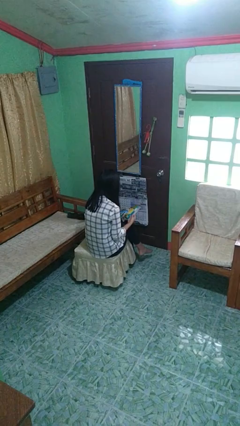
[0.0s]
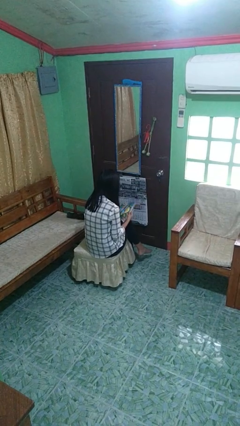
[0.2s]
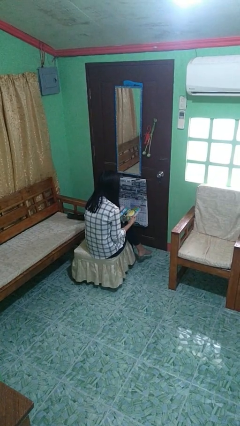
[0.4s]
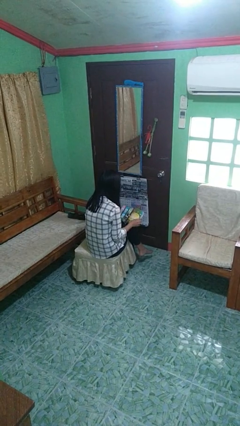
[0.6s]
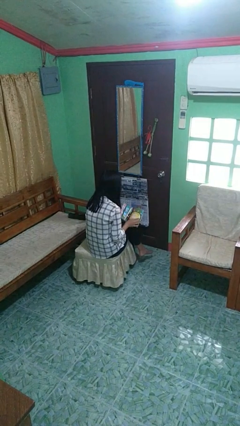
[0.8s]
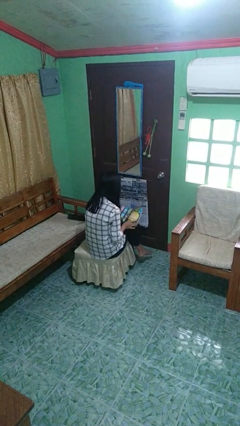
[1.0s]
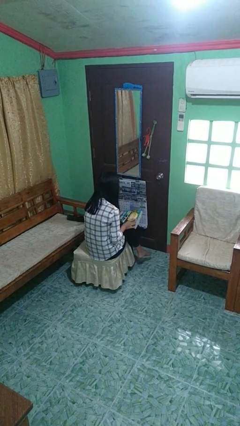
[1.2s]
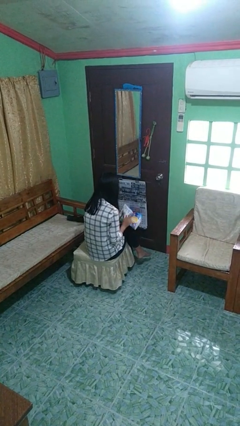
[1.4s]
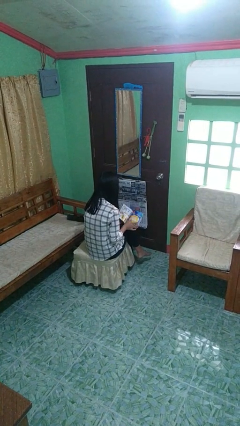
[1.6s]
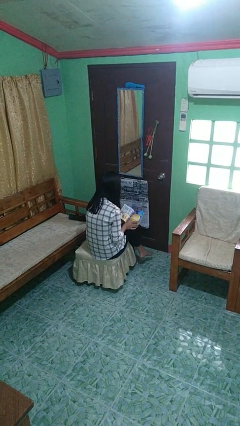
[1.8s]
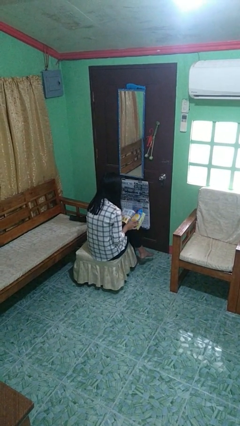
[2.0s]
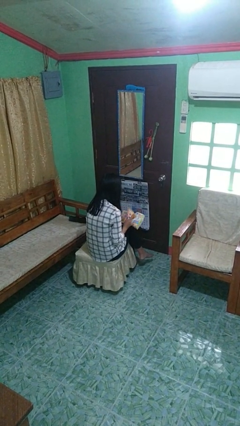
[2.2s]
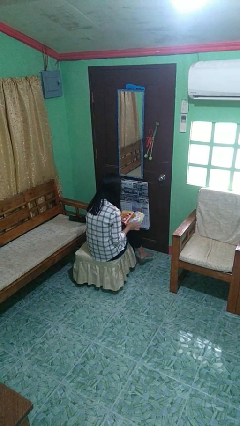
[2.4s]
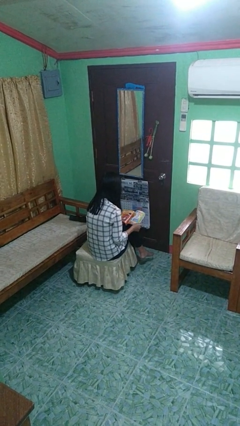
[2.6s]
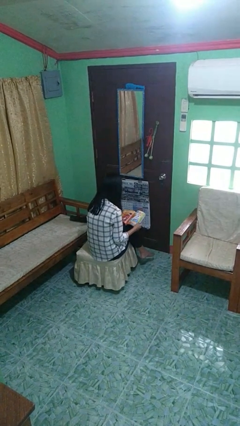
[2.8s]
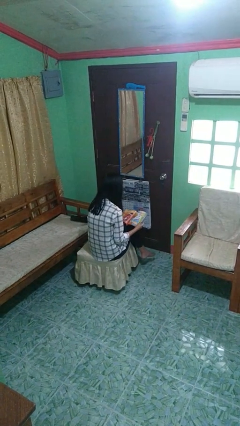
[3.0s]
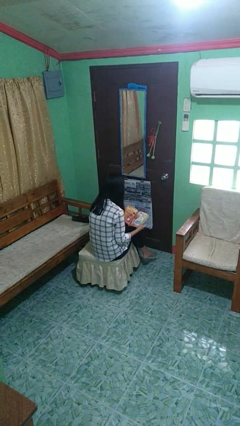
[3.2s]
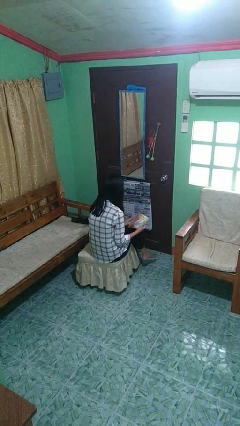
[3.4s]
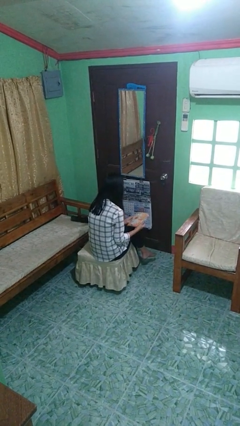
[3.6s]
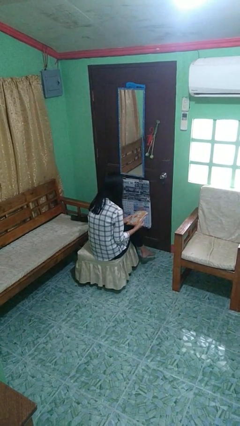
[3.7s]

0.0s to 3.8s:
person reads magazine

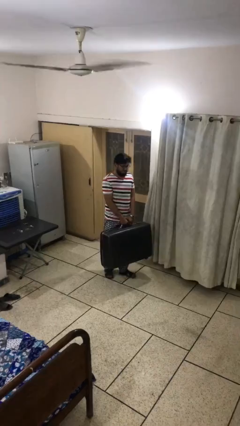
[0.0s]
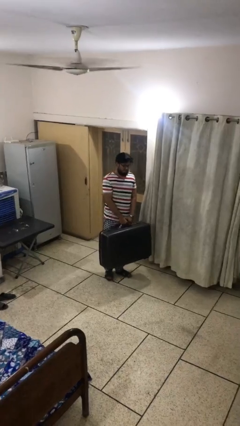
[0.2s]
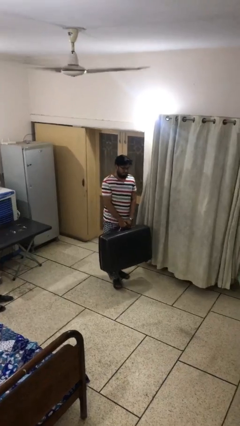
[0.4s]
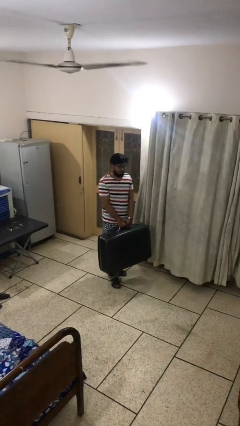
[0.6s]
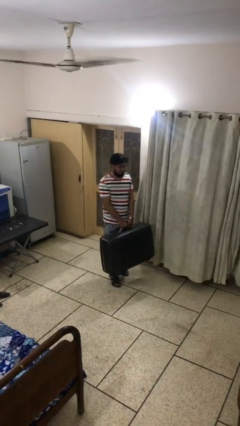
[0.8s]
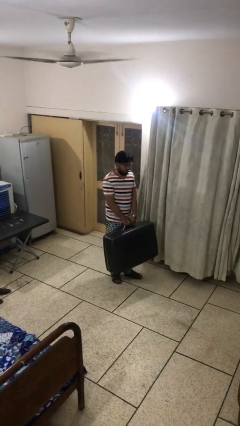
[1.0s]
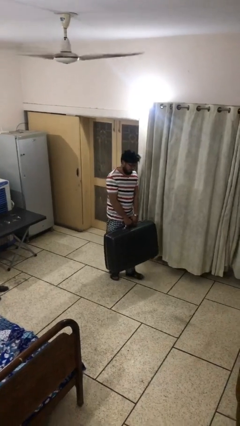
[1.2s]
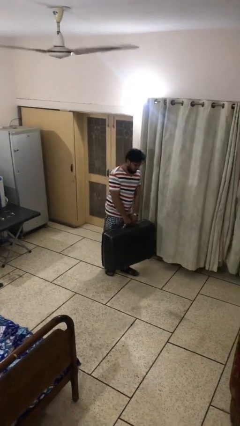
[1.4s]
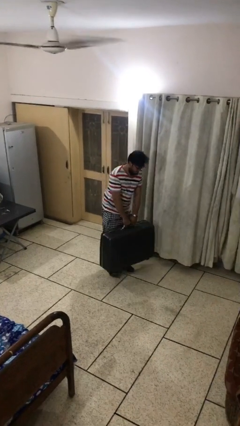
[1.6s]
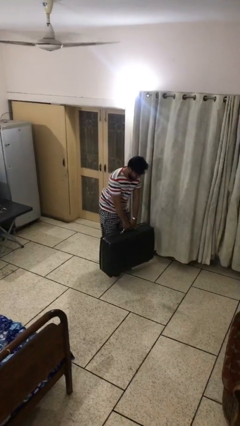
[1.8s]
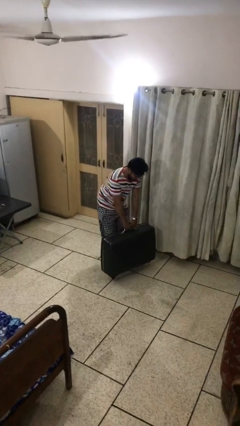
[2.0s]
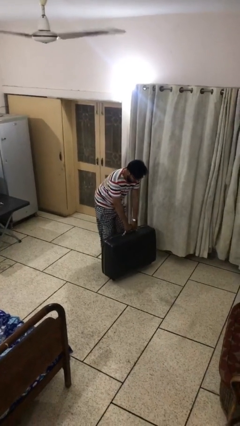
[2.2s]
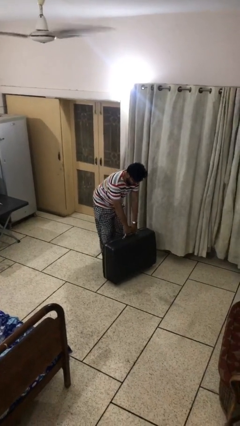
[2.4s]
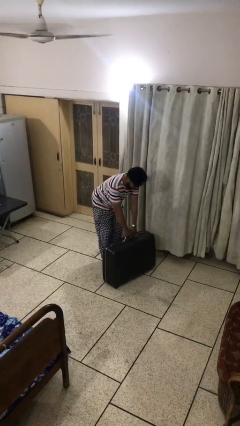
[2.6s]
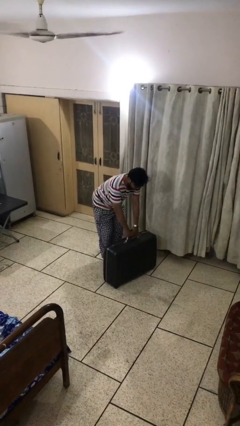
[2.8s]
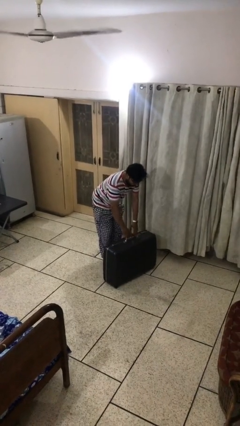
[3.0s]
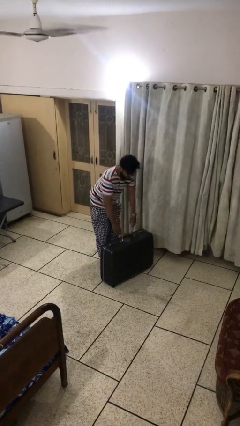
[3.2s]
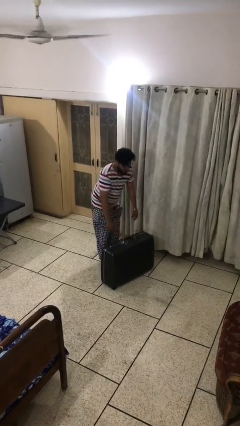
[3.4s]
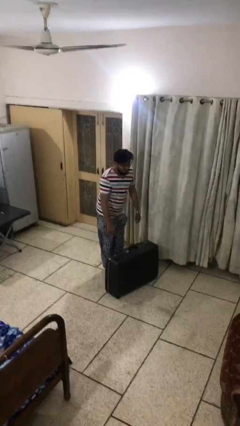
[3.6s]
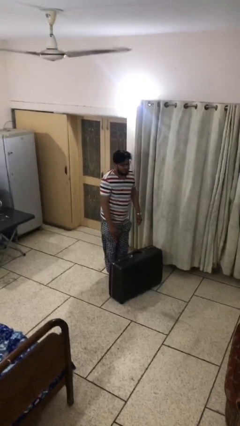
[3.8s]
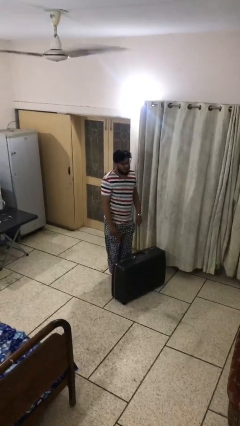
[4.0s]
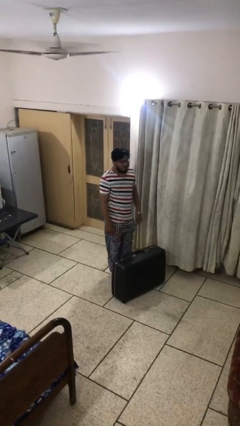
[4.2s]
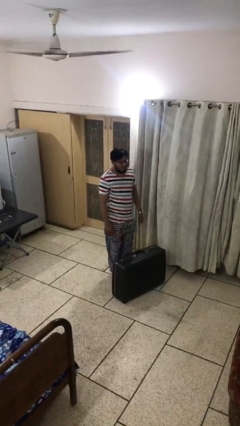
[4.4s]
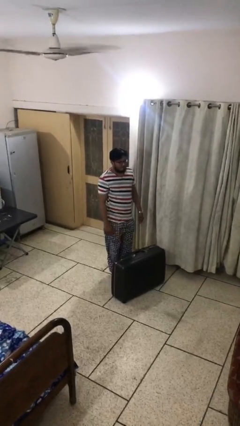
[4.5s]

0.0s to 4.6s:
person puts down object on floor

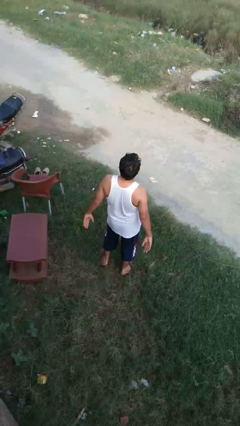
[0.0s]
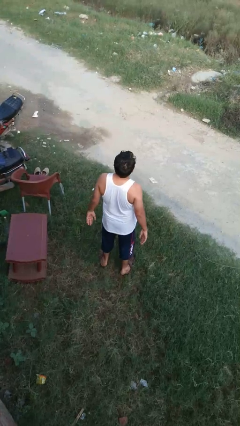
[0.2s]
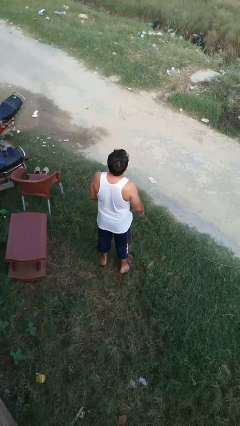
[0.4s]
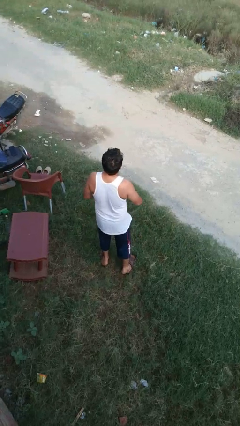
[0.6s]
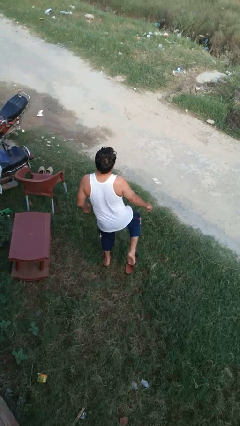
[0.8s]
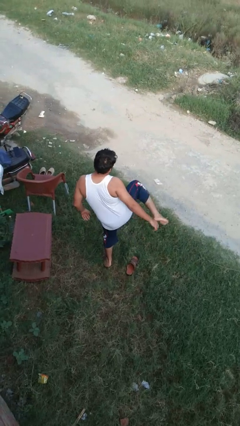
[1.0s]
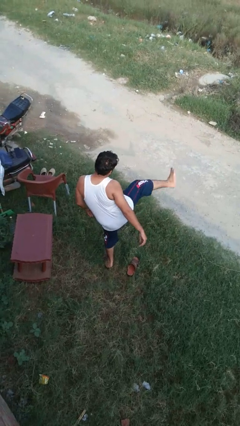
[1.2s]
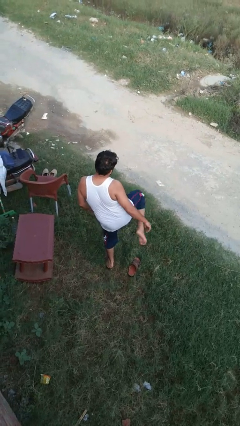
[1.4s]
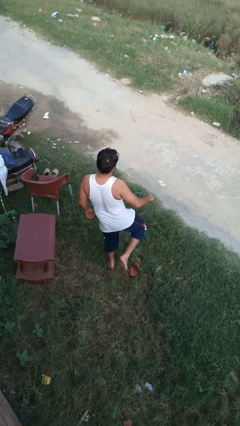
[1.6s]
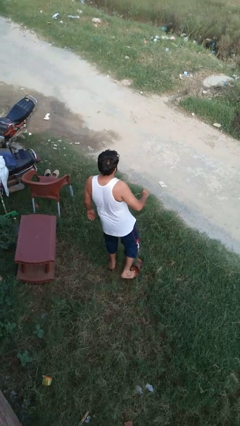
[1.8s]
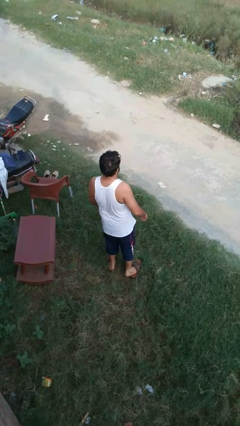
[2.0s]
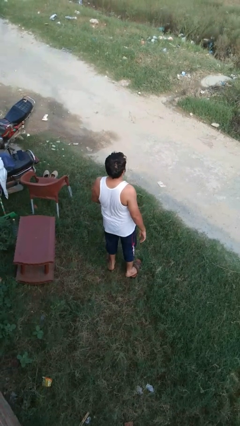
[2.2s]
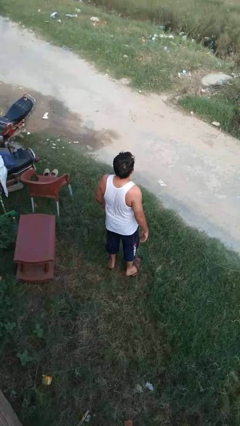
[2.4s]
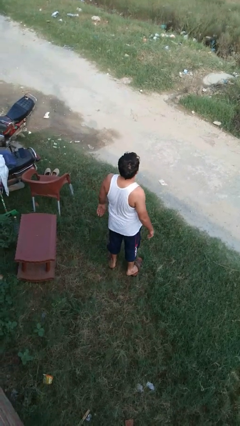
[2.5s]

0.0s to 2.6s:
person karate kicks

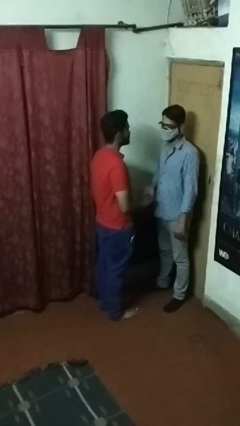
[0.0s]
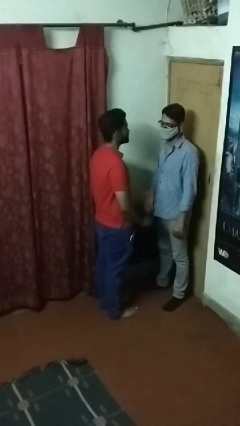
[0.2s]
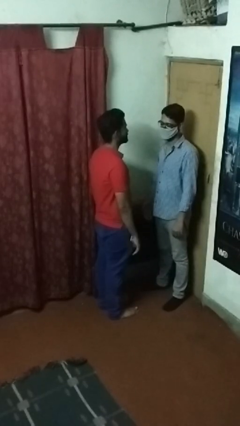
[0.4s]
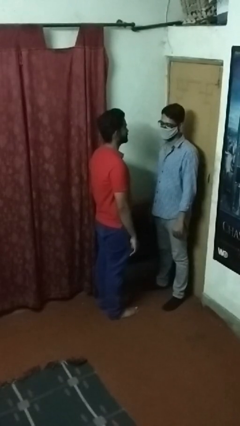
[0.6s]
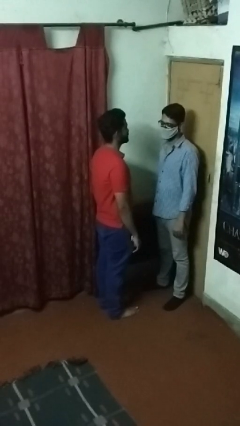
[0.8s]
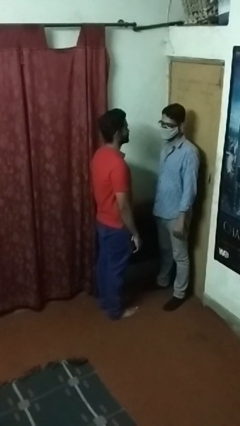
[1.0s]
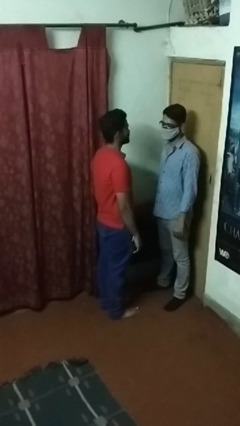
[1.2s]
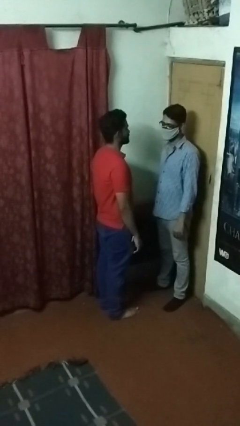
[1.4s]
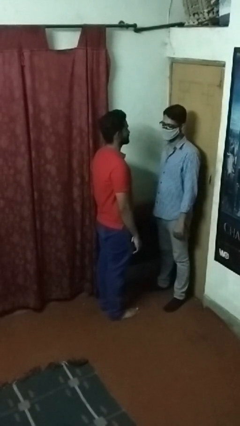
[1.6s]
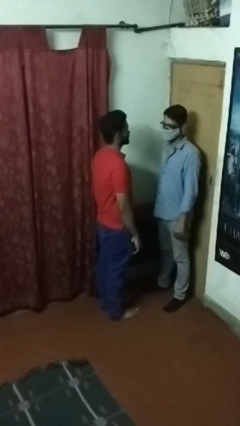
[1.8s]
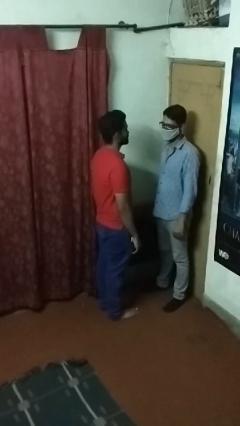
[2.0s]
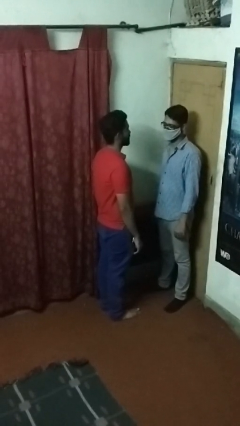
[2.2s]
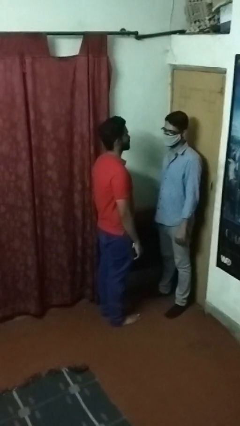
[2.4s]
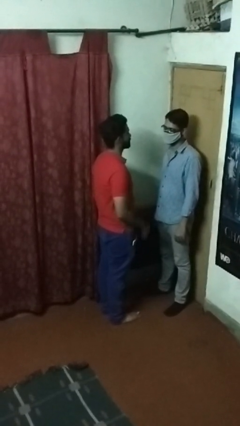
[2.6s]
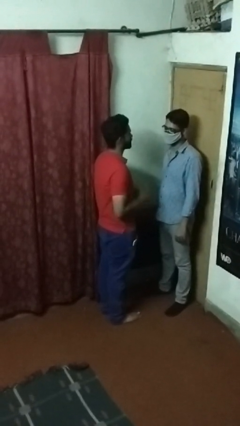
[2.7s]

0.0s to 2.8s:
person highfives hand

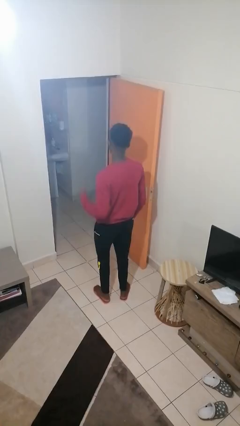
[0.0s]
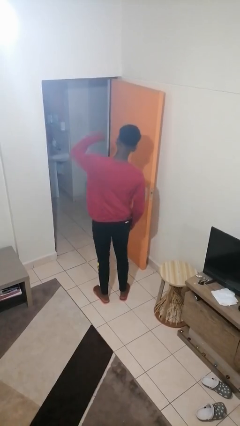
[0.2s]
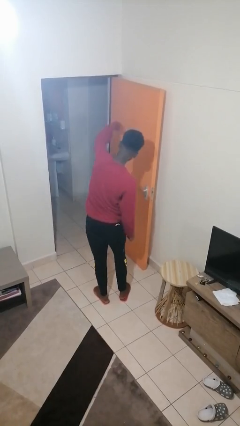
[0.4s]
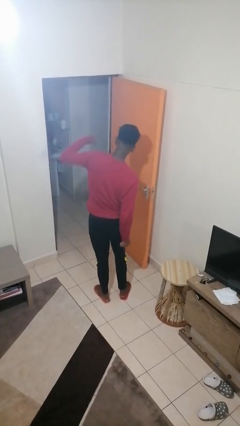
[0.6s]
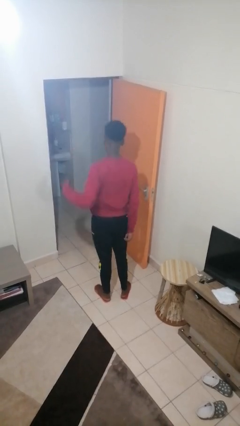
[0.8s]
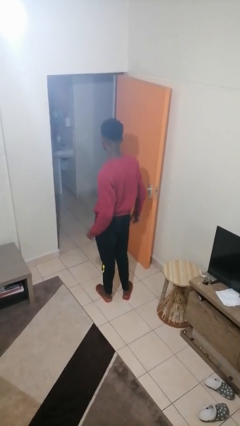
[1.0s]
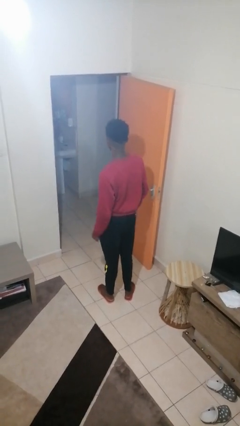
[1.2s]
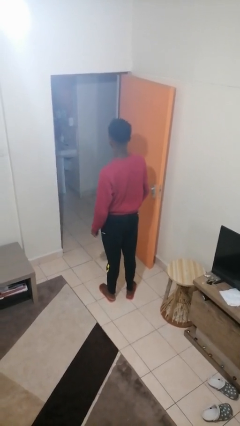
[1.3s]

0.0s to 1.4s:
person punches

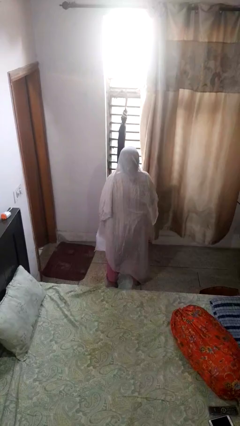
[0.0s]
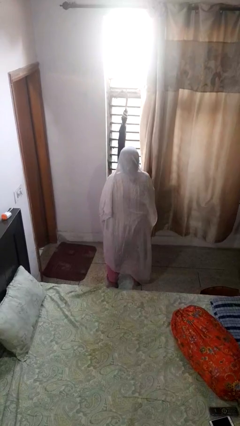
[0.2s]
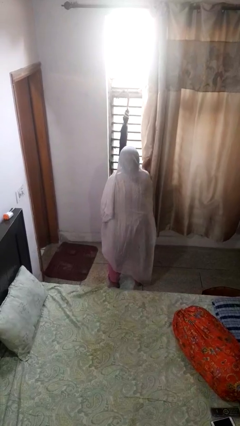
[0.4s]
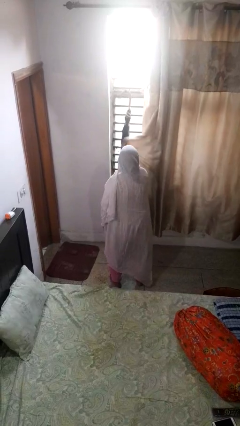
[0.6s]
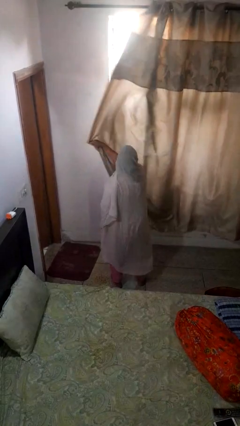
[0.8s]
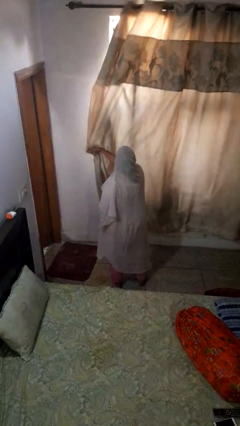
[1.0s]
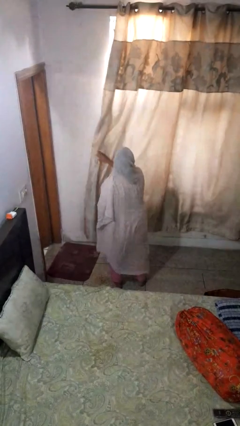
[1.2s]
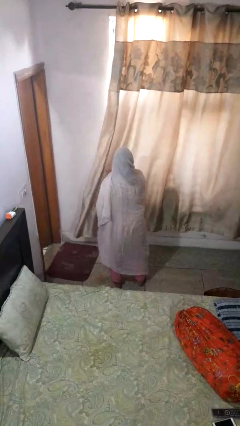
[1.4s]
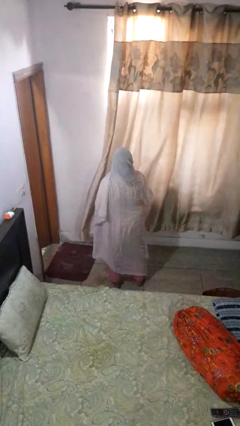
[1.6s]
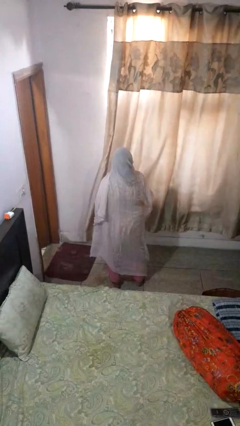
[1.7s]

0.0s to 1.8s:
person closes curtains
